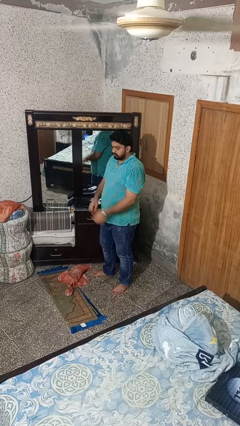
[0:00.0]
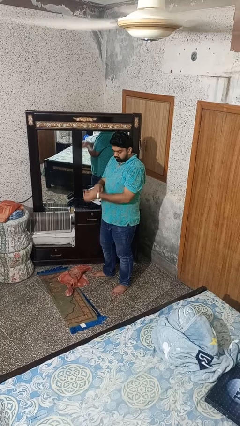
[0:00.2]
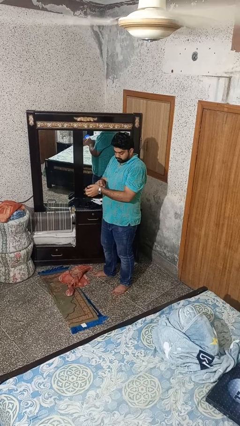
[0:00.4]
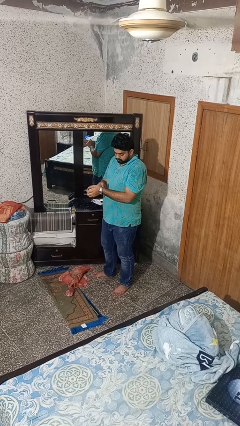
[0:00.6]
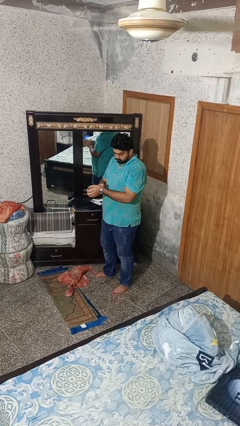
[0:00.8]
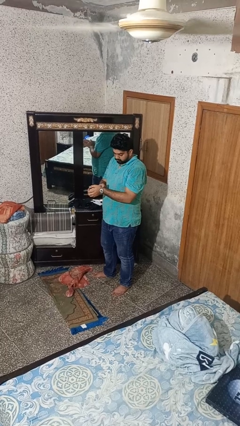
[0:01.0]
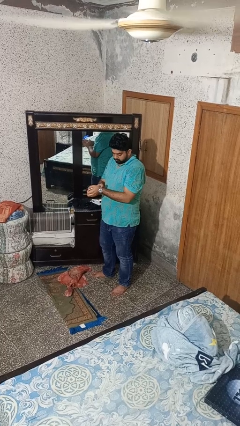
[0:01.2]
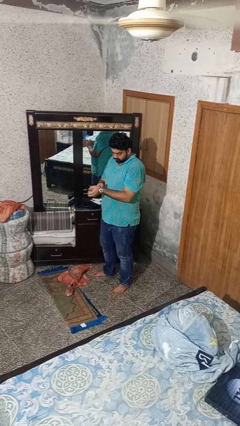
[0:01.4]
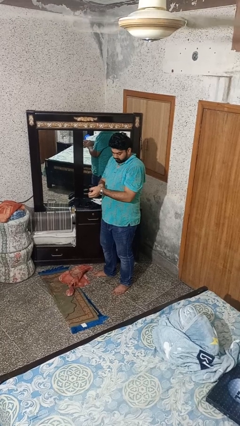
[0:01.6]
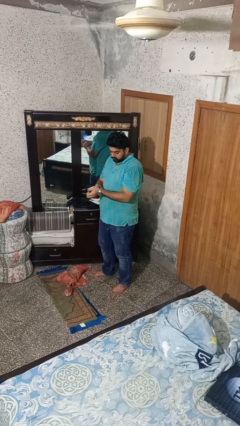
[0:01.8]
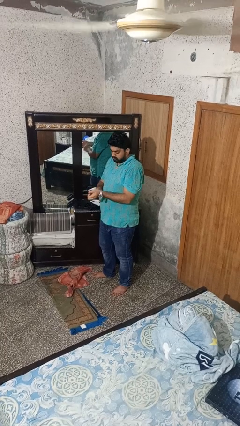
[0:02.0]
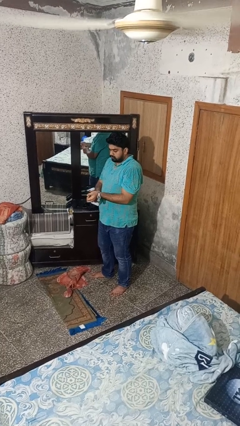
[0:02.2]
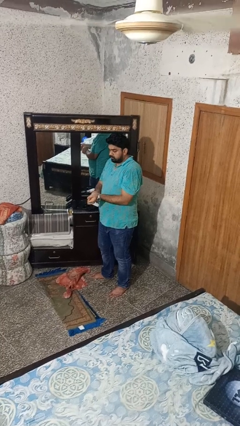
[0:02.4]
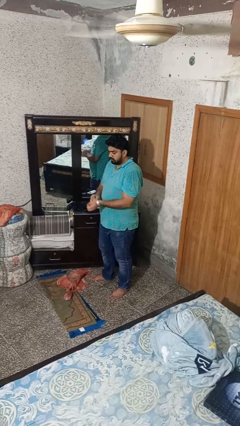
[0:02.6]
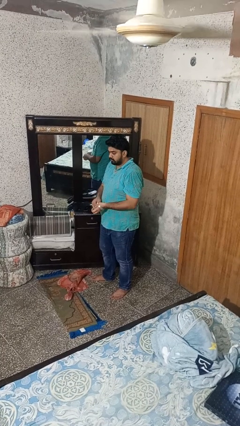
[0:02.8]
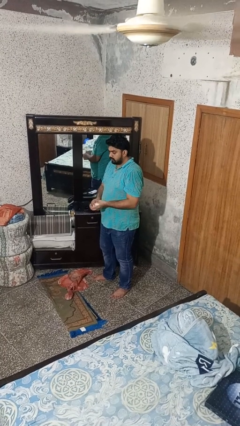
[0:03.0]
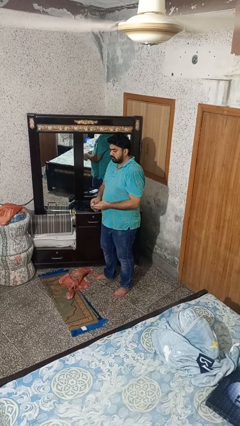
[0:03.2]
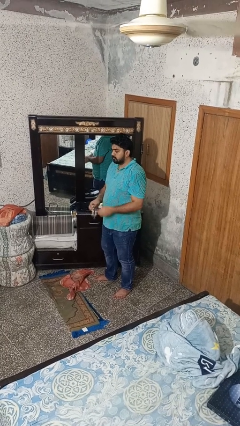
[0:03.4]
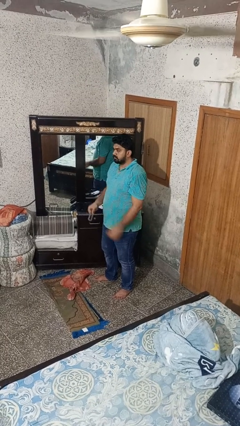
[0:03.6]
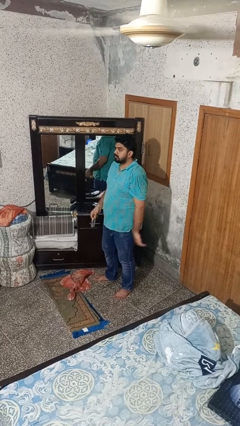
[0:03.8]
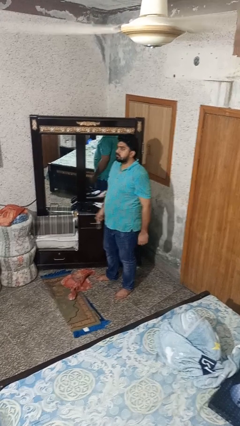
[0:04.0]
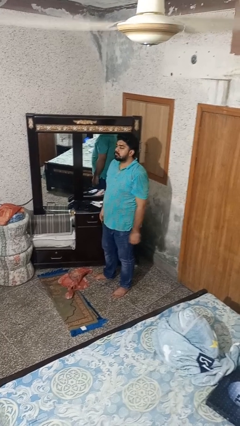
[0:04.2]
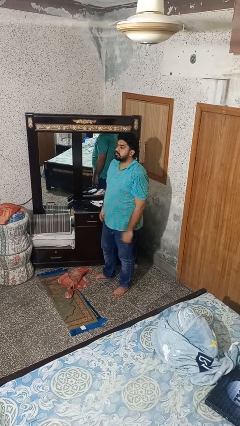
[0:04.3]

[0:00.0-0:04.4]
person takes off wristwatch

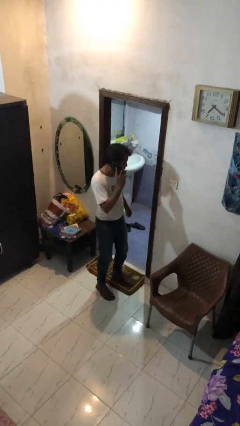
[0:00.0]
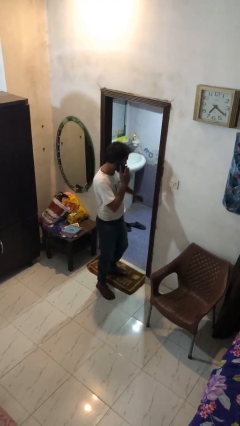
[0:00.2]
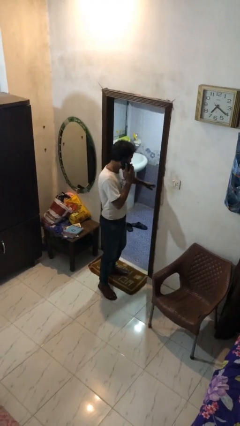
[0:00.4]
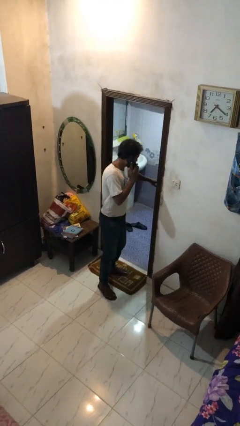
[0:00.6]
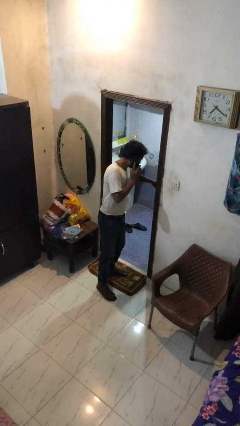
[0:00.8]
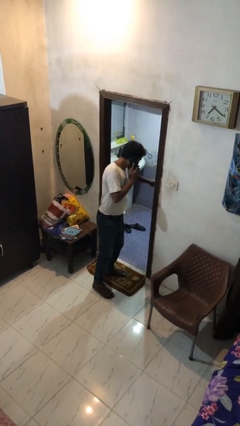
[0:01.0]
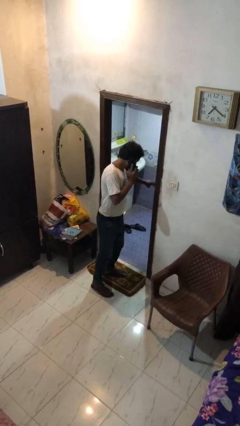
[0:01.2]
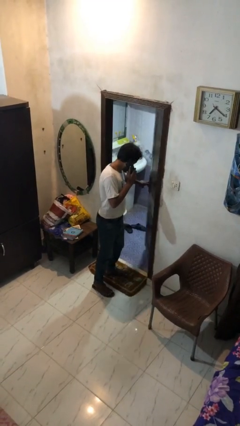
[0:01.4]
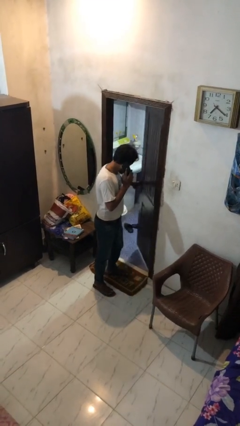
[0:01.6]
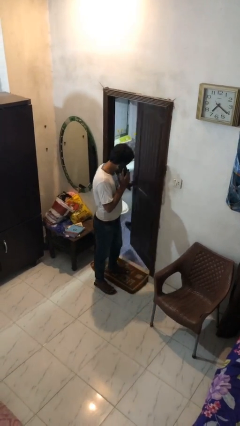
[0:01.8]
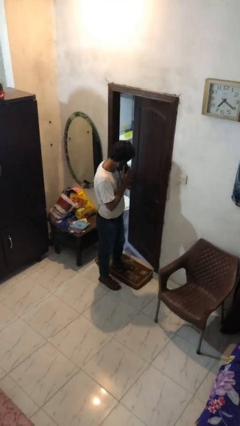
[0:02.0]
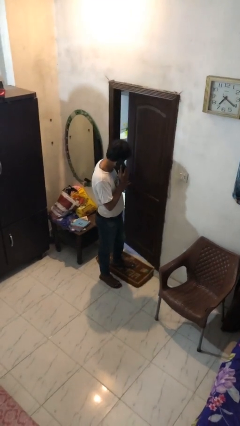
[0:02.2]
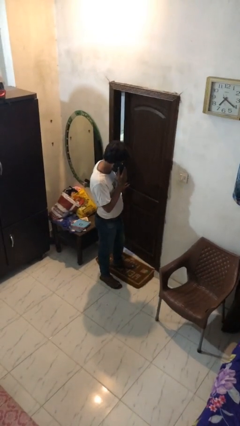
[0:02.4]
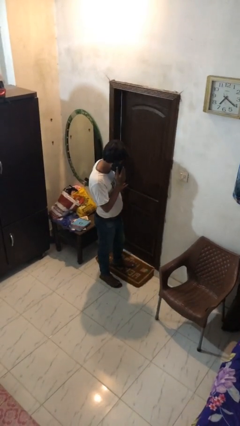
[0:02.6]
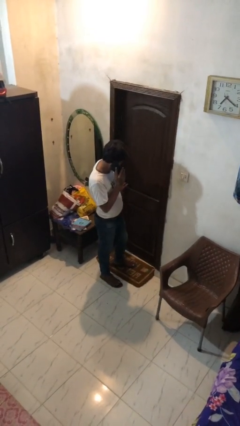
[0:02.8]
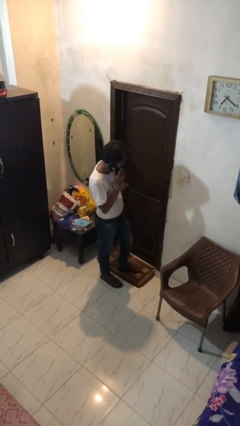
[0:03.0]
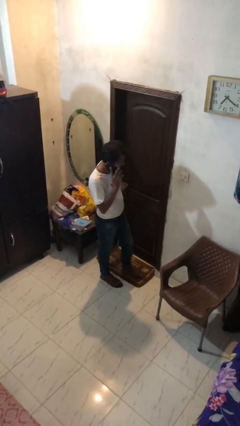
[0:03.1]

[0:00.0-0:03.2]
person closes facility door

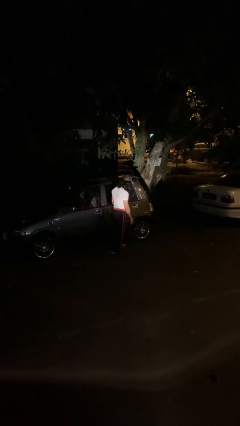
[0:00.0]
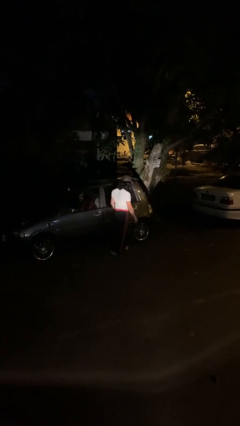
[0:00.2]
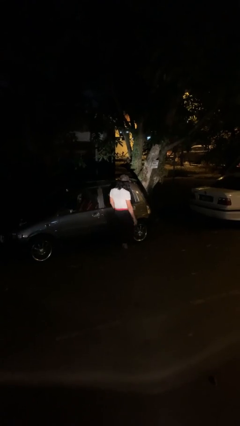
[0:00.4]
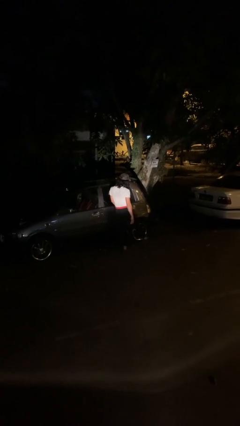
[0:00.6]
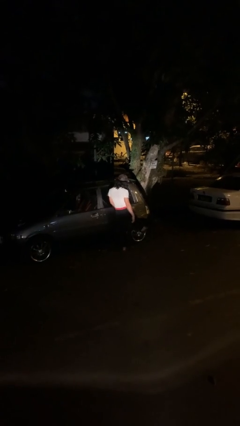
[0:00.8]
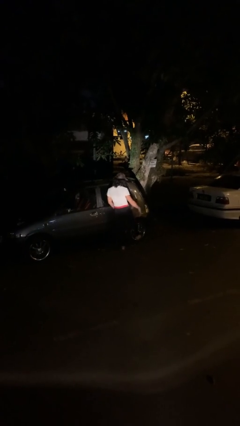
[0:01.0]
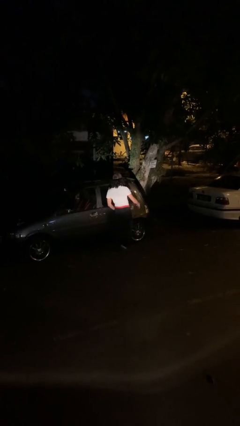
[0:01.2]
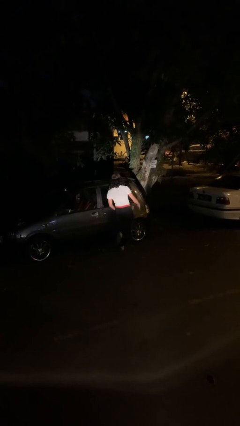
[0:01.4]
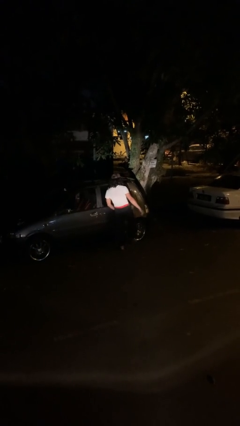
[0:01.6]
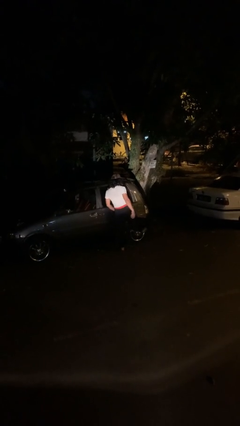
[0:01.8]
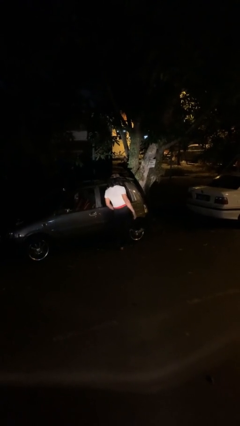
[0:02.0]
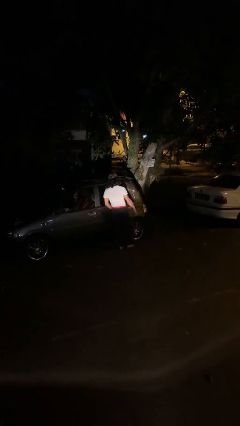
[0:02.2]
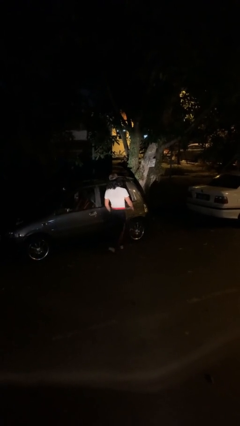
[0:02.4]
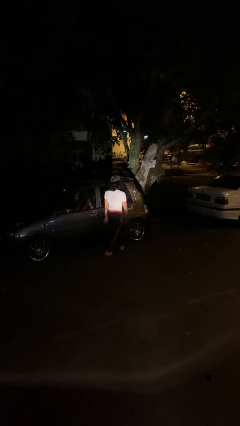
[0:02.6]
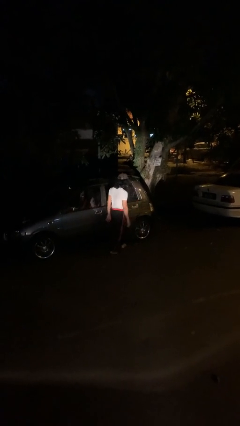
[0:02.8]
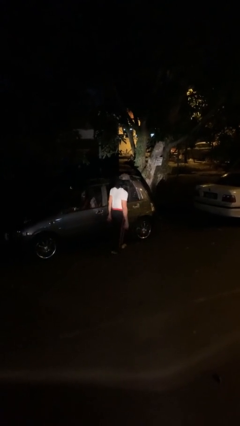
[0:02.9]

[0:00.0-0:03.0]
person kicks car tires

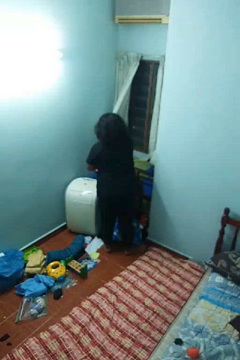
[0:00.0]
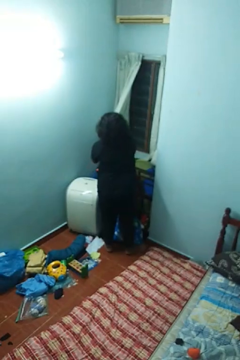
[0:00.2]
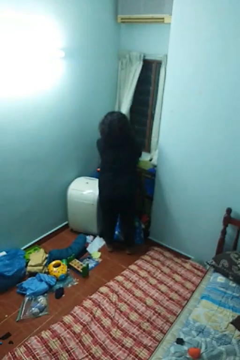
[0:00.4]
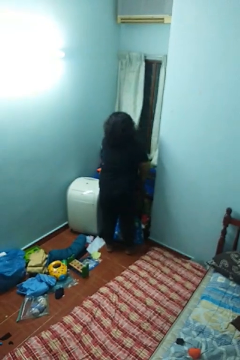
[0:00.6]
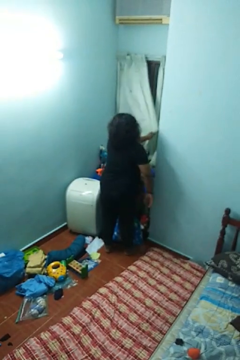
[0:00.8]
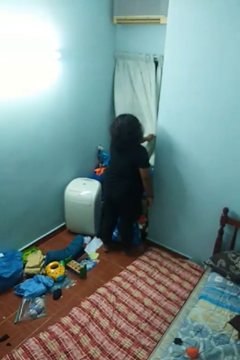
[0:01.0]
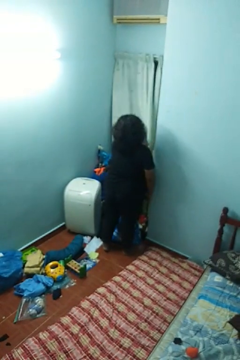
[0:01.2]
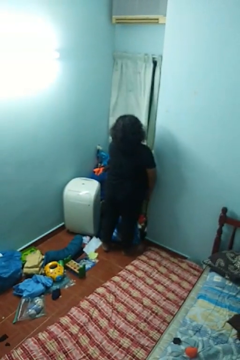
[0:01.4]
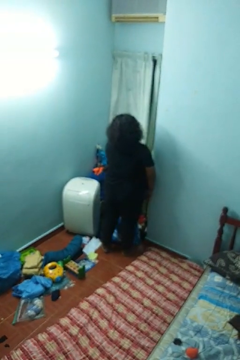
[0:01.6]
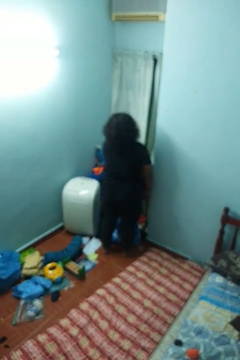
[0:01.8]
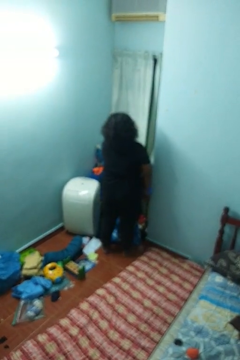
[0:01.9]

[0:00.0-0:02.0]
person closes curtains

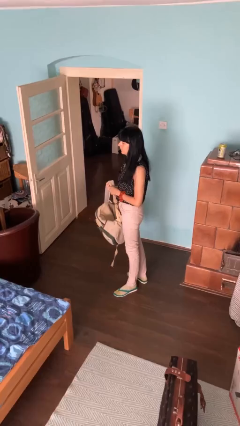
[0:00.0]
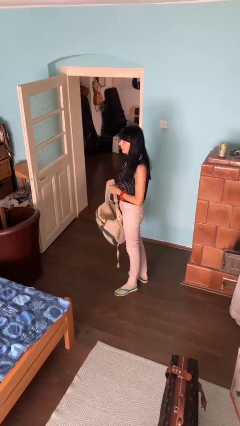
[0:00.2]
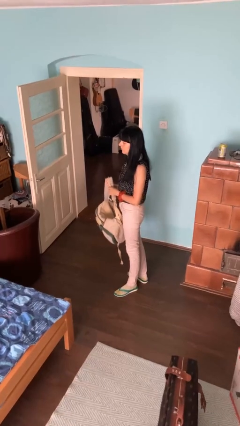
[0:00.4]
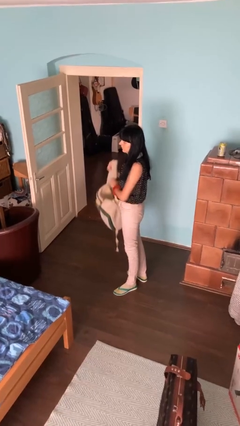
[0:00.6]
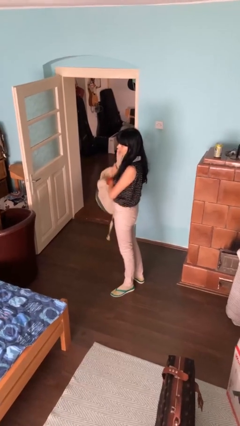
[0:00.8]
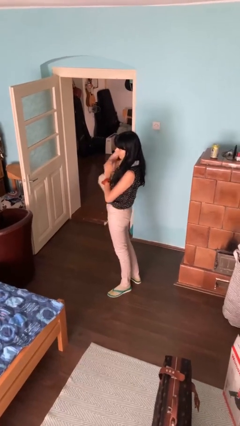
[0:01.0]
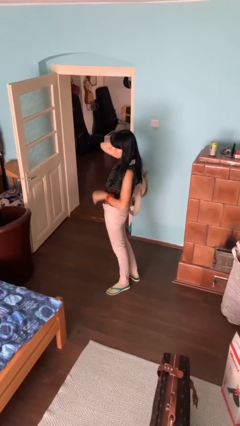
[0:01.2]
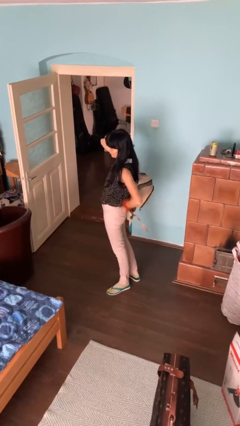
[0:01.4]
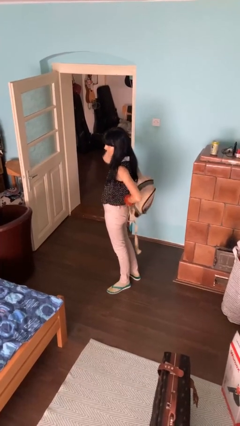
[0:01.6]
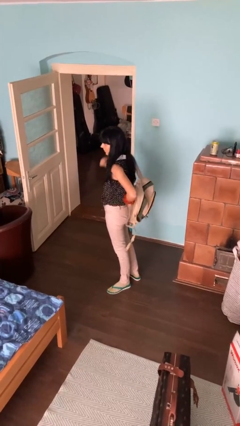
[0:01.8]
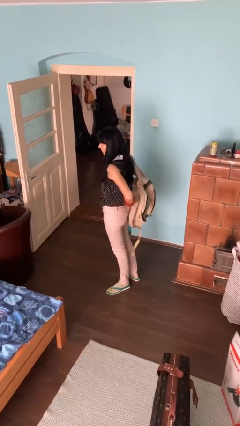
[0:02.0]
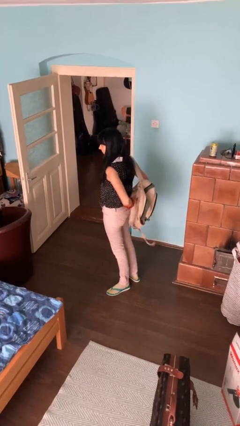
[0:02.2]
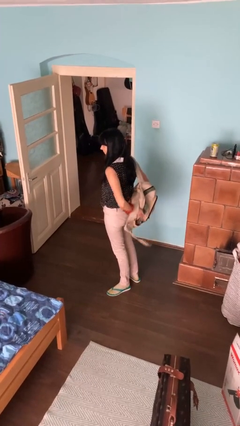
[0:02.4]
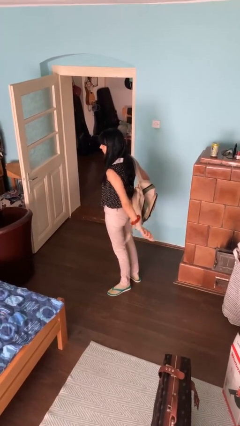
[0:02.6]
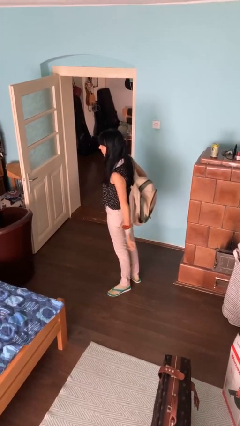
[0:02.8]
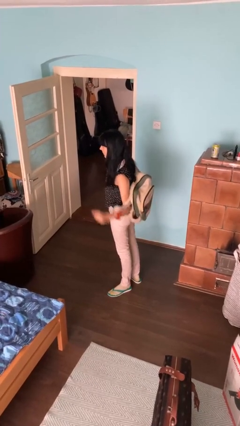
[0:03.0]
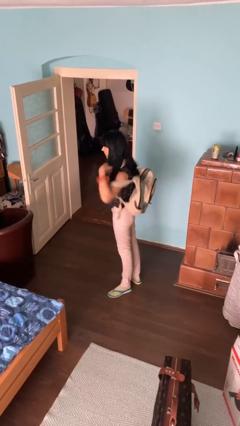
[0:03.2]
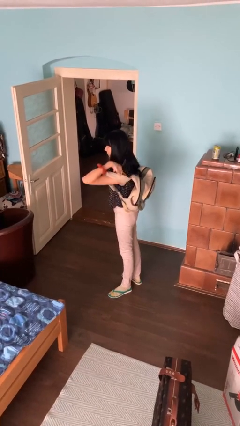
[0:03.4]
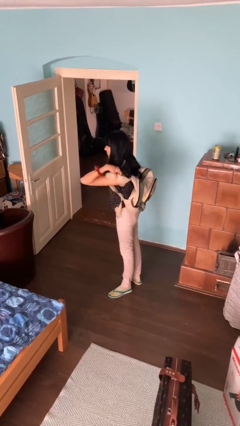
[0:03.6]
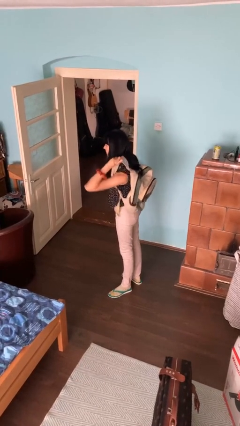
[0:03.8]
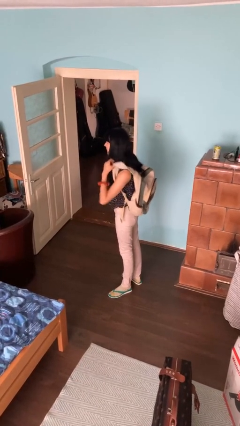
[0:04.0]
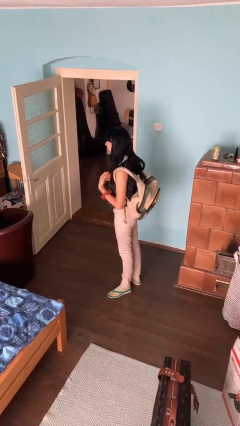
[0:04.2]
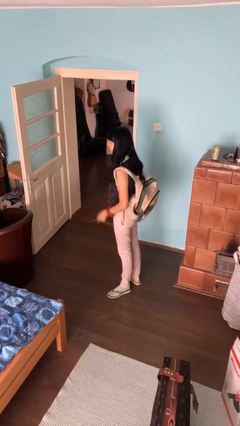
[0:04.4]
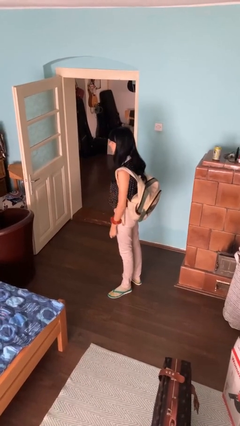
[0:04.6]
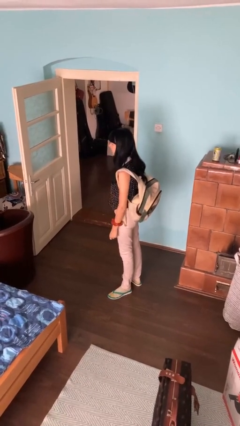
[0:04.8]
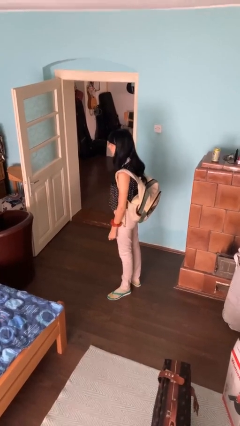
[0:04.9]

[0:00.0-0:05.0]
person puts on backpack
